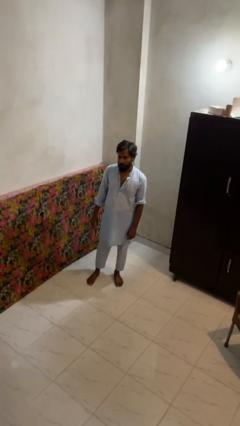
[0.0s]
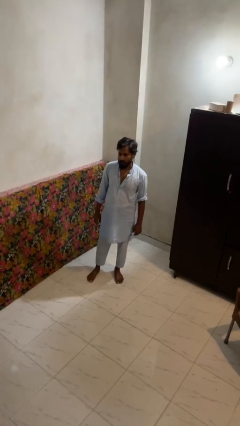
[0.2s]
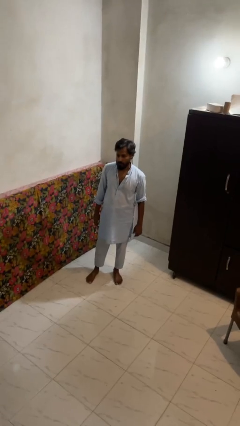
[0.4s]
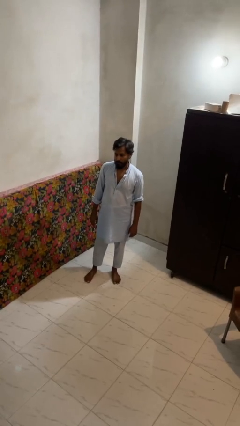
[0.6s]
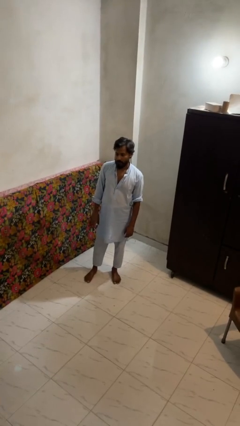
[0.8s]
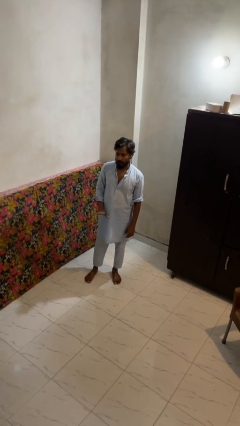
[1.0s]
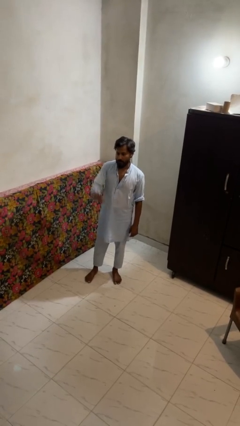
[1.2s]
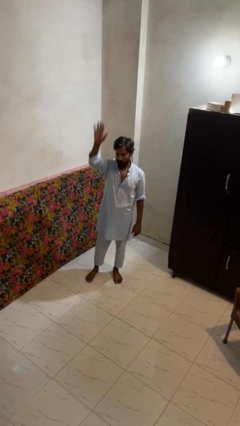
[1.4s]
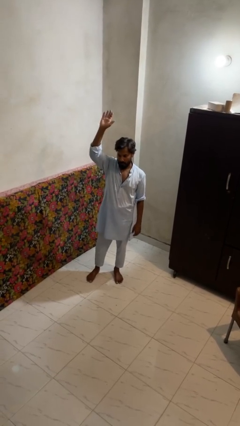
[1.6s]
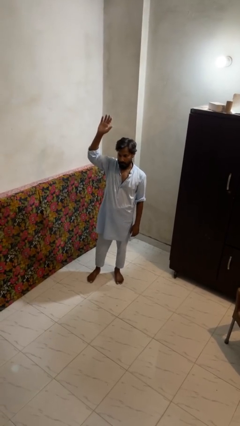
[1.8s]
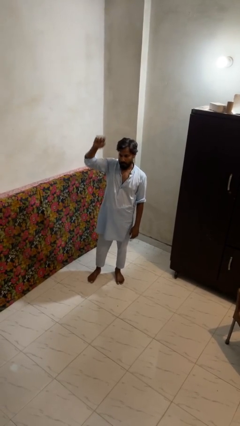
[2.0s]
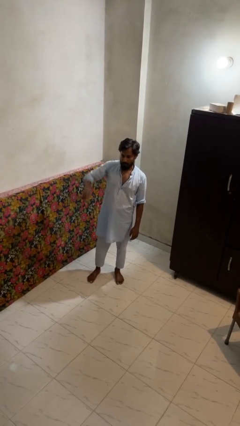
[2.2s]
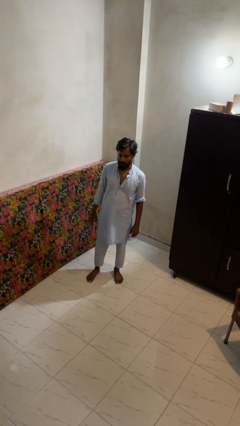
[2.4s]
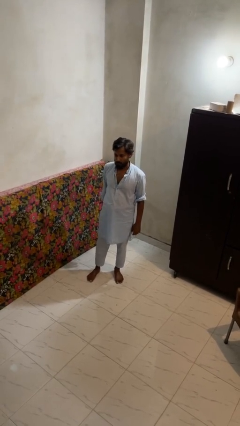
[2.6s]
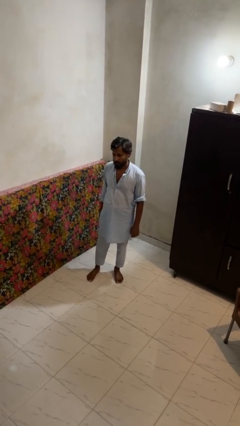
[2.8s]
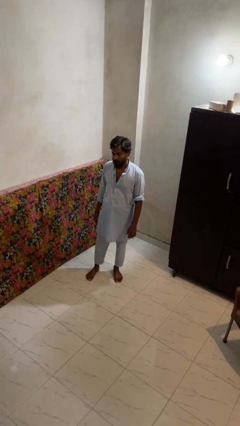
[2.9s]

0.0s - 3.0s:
person gestures swipe up

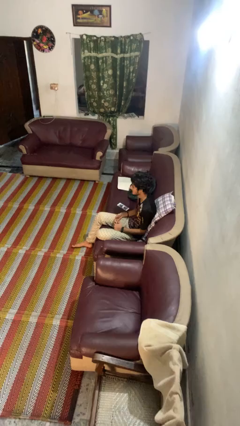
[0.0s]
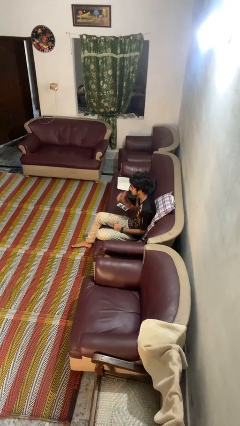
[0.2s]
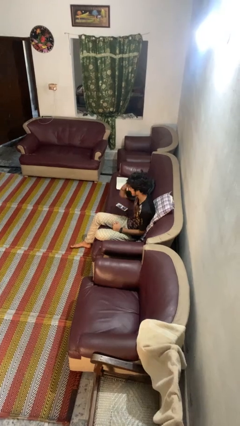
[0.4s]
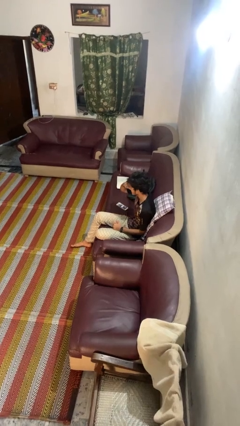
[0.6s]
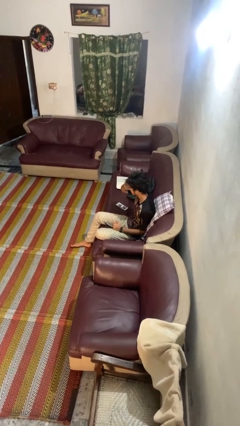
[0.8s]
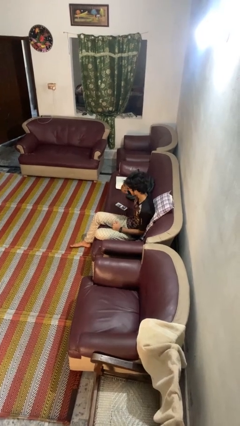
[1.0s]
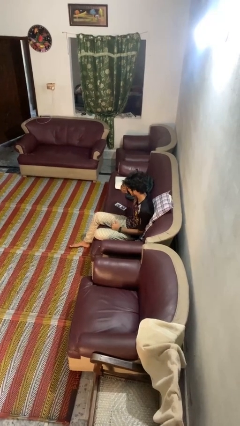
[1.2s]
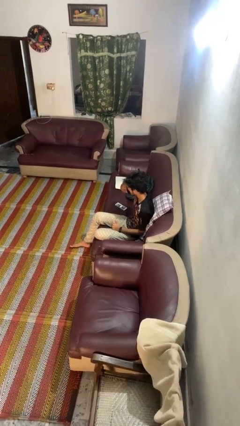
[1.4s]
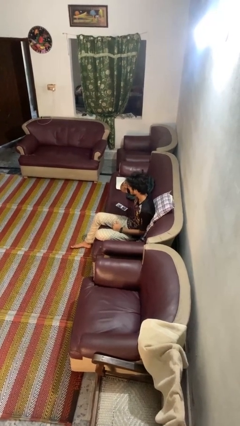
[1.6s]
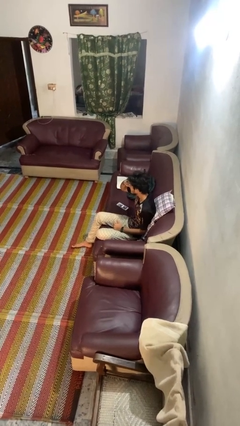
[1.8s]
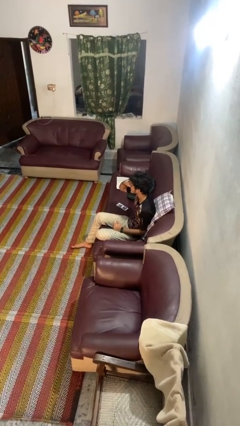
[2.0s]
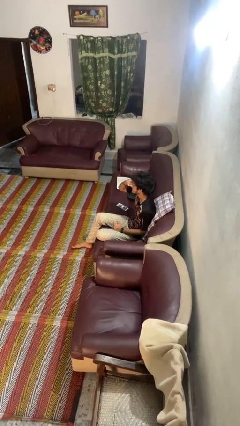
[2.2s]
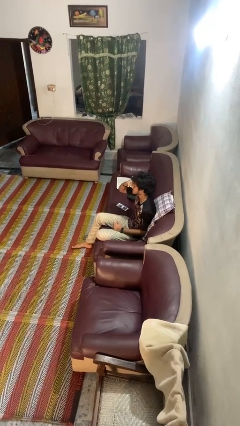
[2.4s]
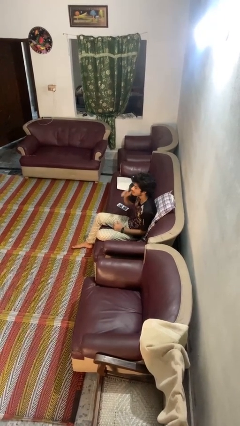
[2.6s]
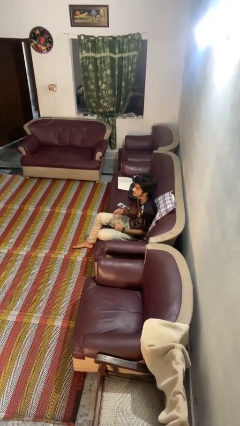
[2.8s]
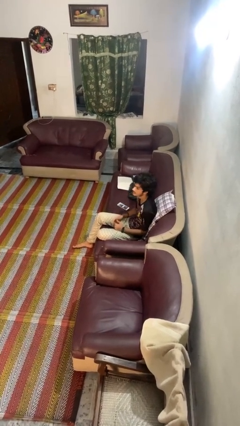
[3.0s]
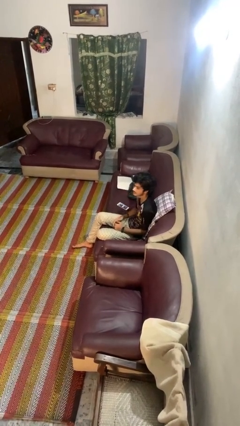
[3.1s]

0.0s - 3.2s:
person shades eyes

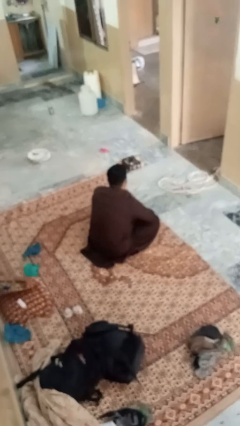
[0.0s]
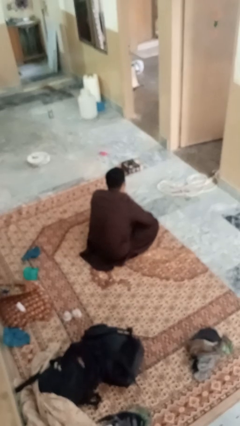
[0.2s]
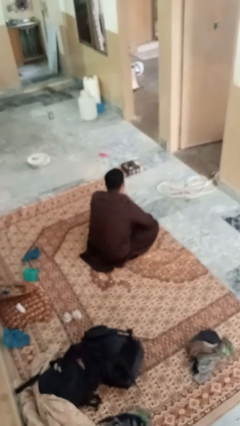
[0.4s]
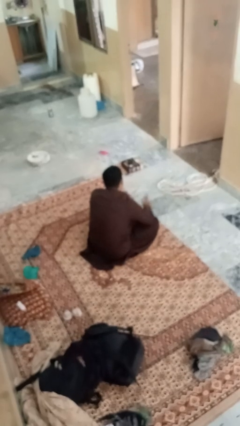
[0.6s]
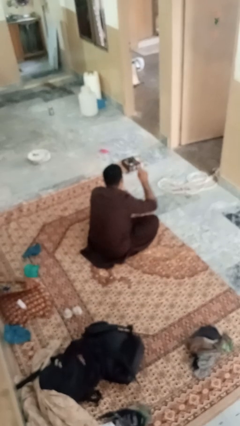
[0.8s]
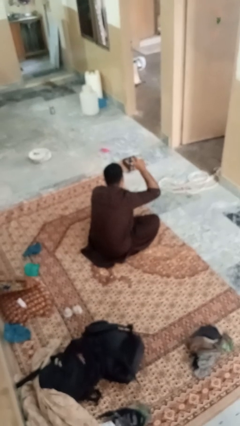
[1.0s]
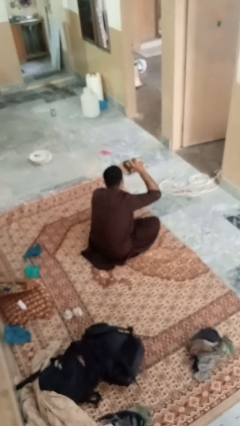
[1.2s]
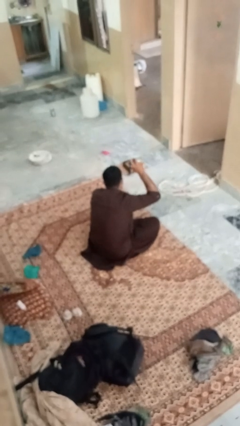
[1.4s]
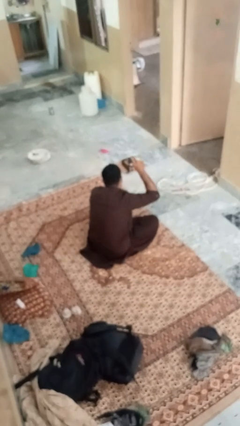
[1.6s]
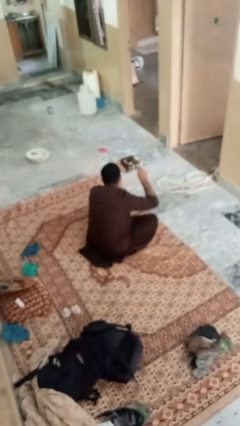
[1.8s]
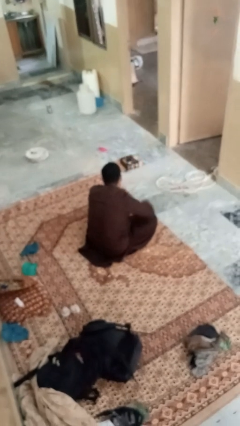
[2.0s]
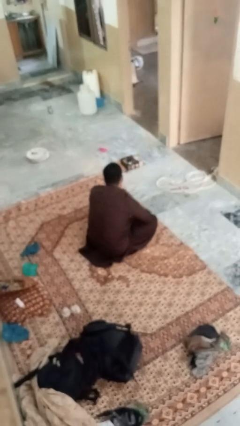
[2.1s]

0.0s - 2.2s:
person gestures number one

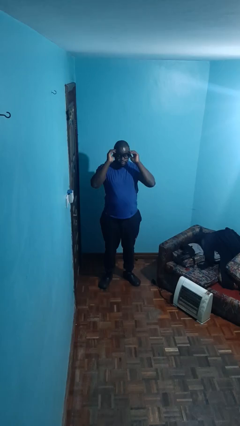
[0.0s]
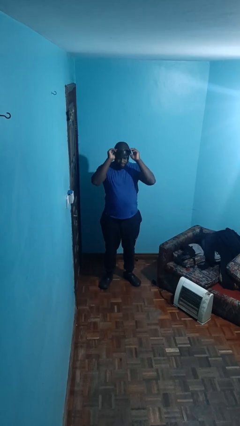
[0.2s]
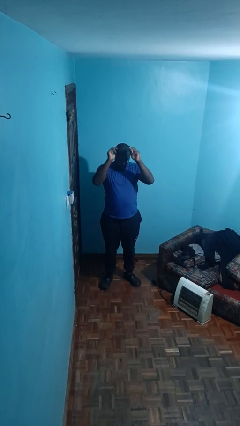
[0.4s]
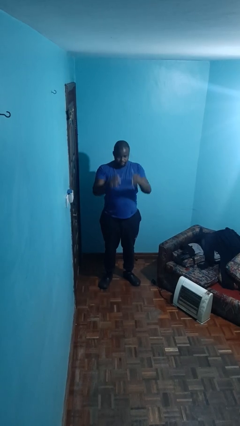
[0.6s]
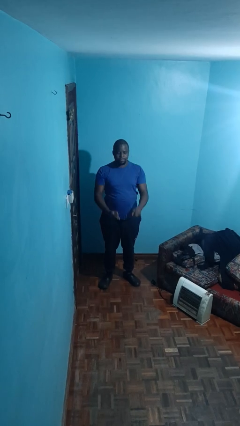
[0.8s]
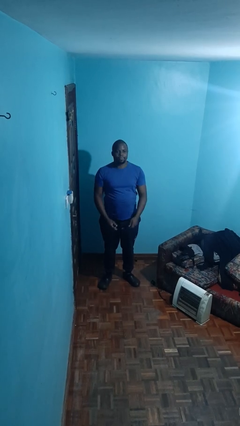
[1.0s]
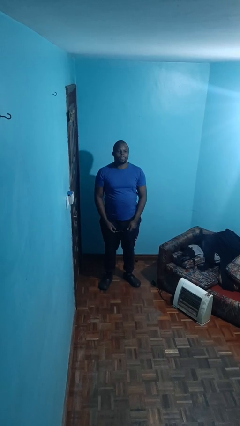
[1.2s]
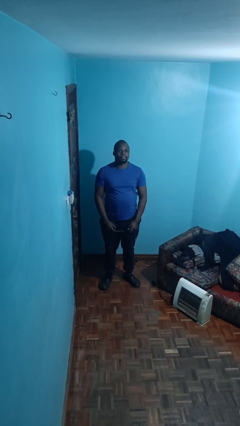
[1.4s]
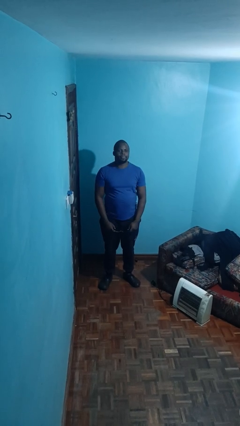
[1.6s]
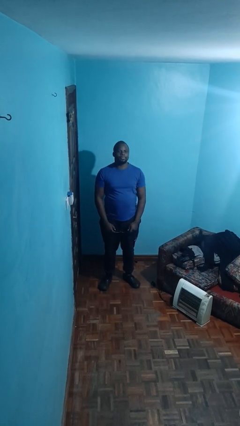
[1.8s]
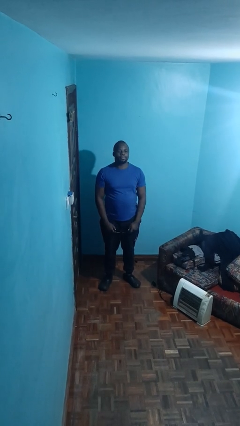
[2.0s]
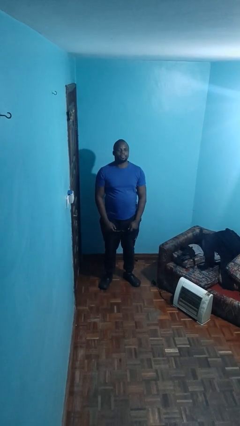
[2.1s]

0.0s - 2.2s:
person takes off glasses

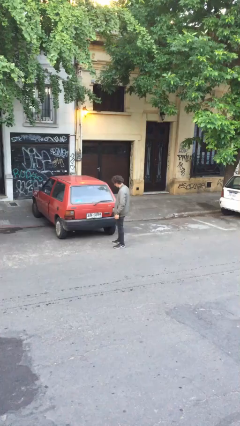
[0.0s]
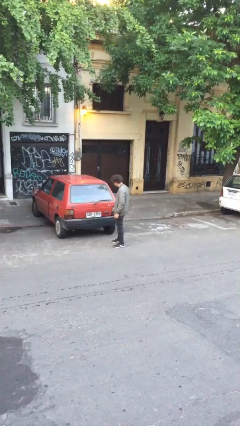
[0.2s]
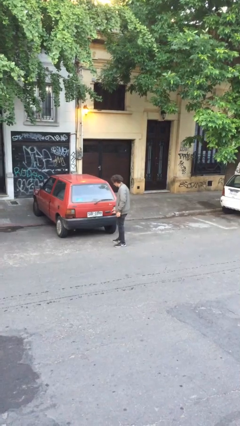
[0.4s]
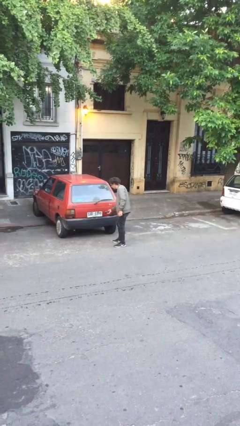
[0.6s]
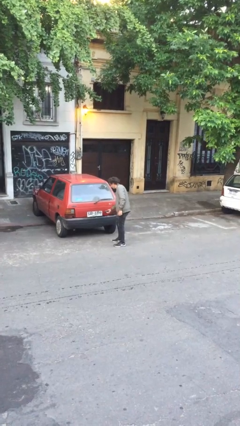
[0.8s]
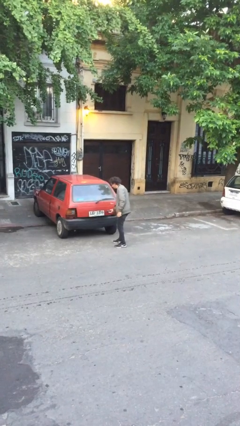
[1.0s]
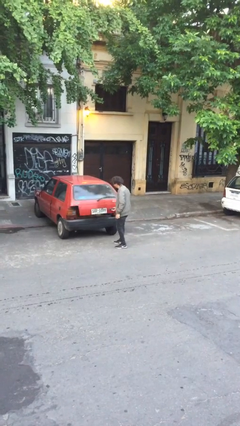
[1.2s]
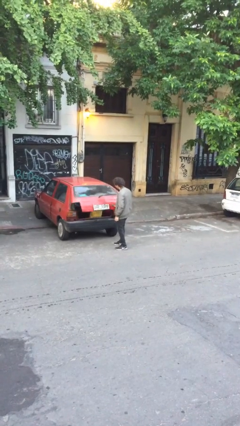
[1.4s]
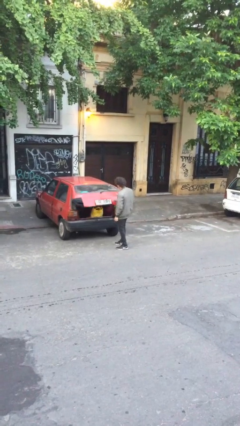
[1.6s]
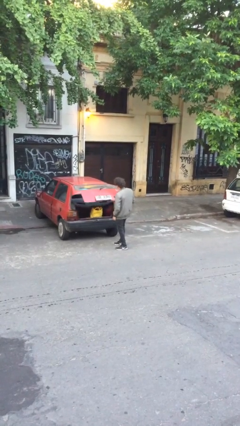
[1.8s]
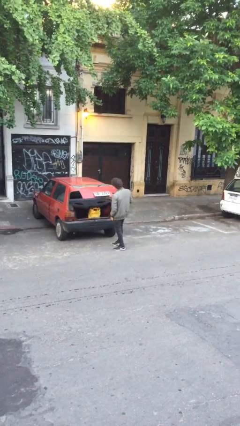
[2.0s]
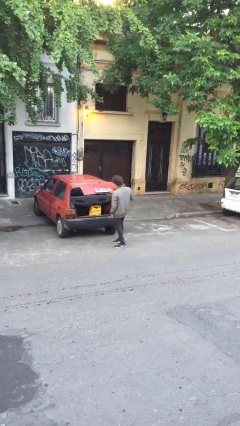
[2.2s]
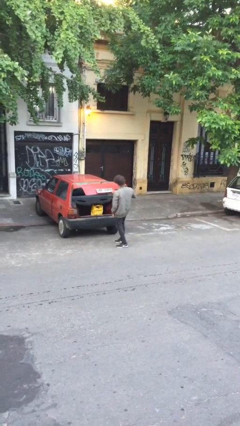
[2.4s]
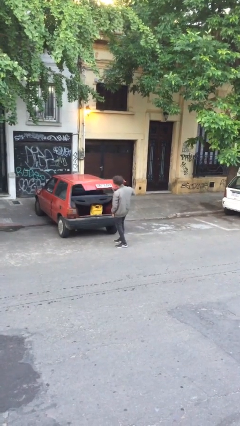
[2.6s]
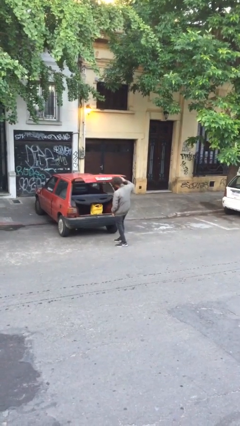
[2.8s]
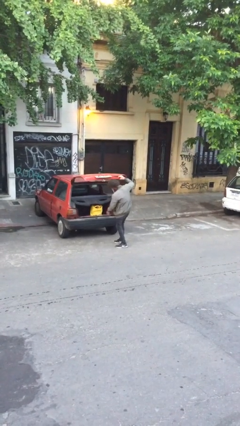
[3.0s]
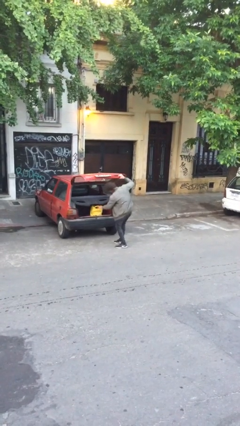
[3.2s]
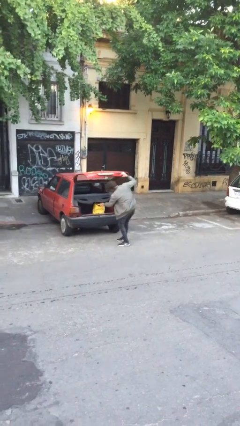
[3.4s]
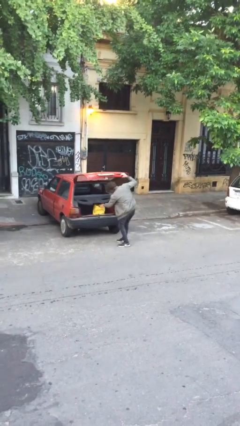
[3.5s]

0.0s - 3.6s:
person opens car trunk

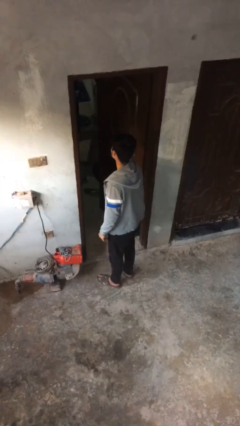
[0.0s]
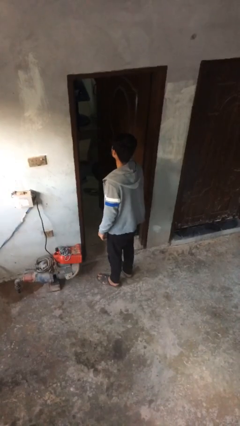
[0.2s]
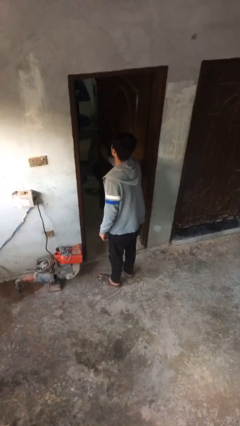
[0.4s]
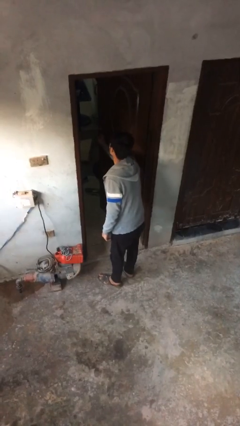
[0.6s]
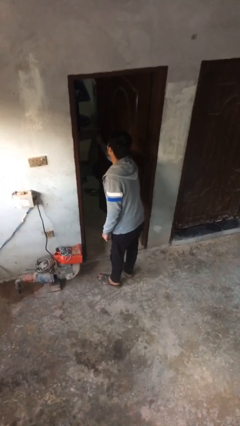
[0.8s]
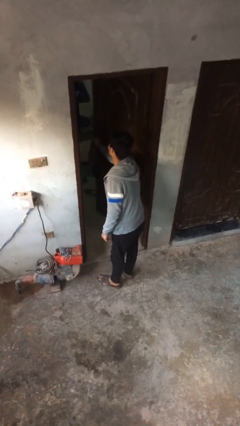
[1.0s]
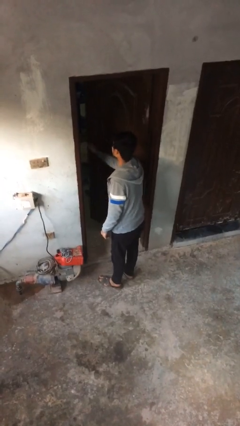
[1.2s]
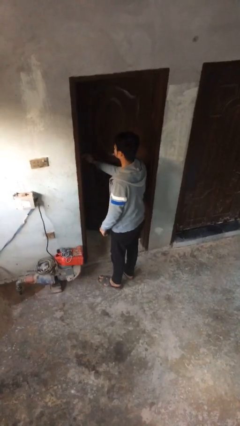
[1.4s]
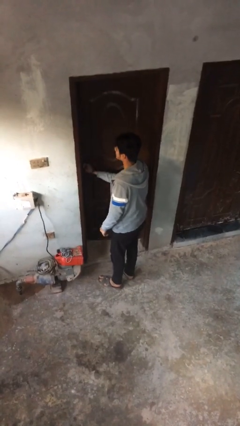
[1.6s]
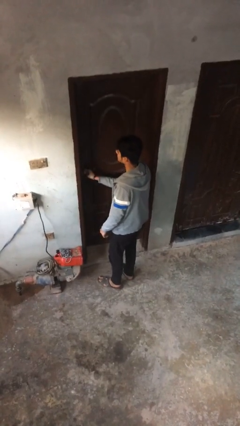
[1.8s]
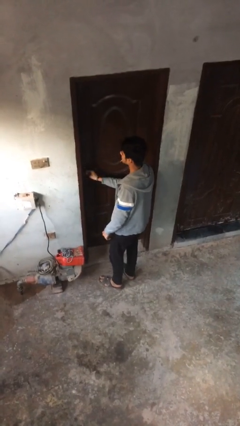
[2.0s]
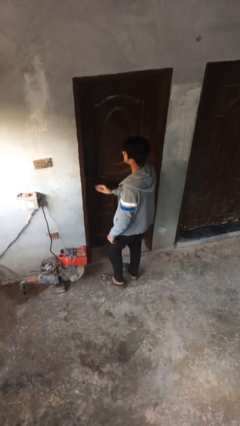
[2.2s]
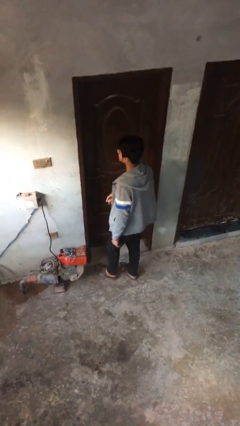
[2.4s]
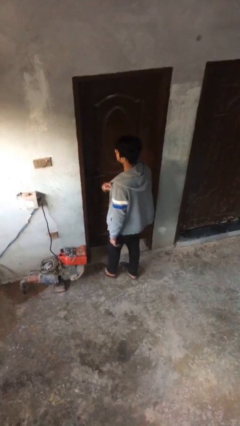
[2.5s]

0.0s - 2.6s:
person closes facility door

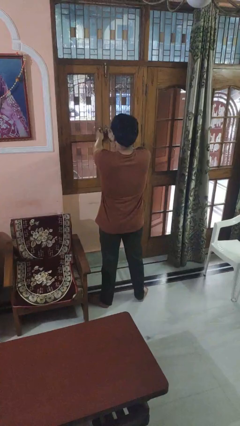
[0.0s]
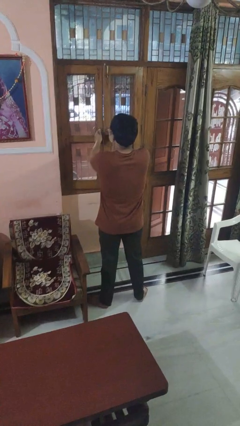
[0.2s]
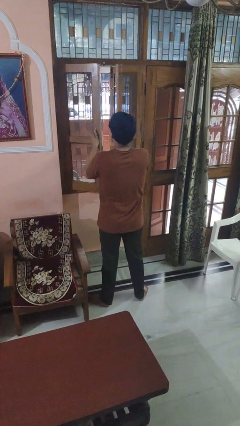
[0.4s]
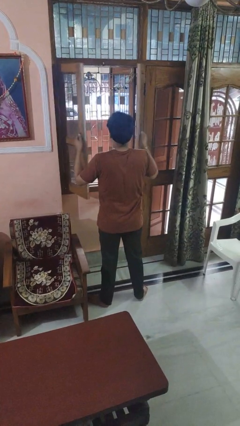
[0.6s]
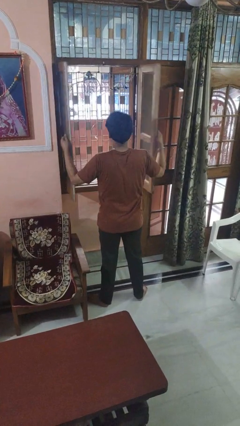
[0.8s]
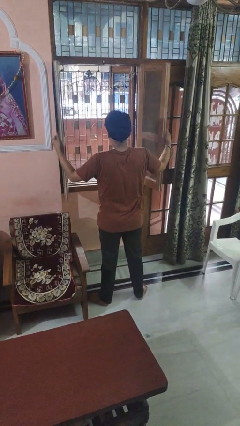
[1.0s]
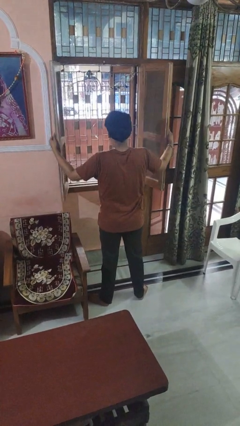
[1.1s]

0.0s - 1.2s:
person opens home window
